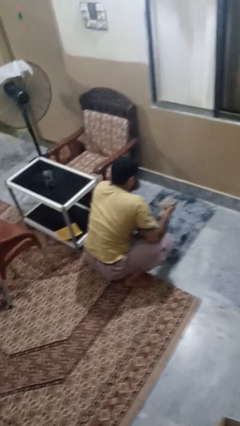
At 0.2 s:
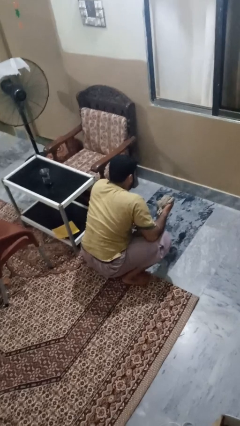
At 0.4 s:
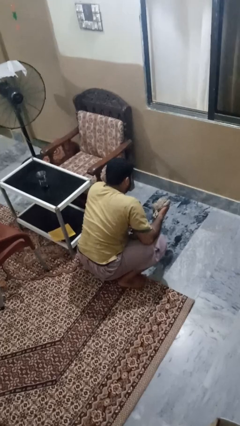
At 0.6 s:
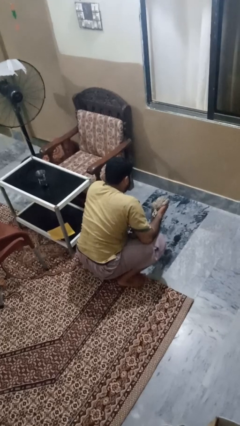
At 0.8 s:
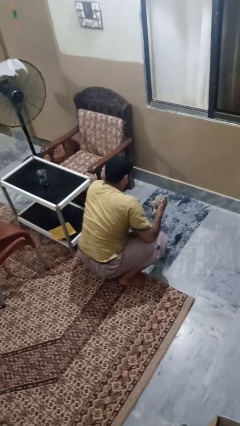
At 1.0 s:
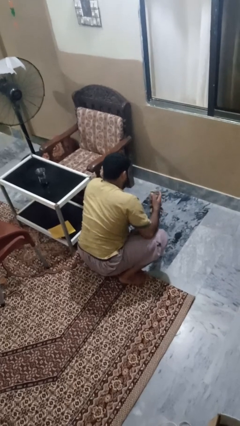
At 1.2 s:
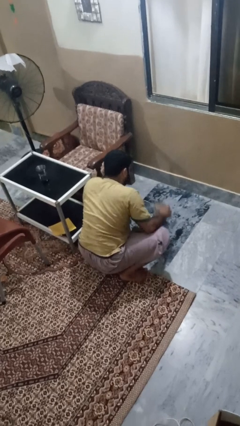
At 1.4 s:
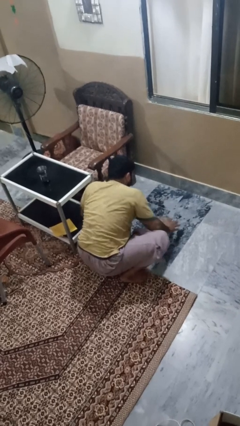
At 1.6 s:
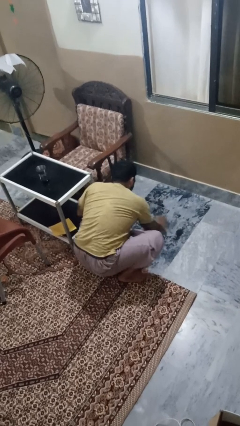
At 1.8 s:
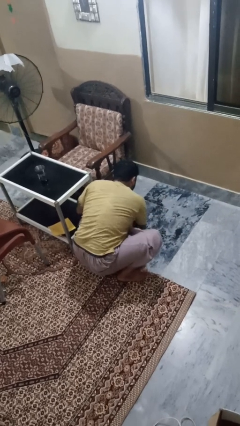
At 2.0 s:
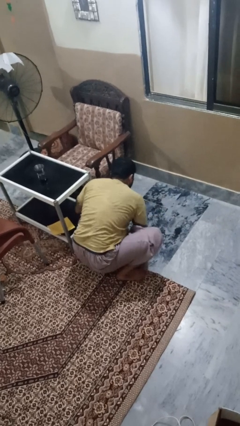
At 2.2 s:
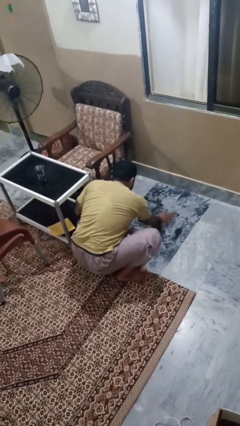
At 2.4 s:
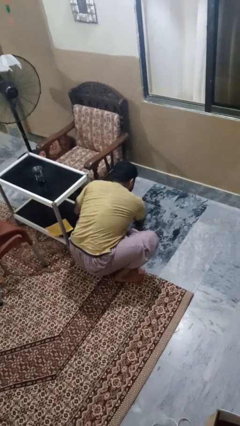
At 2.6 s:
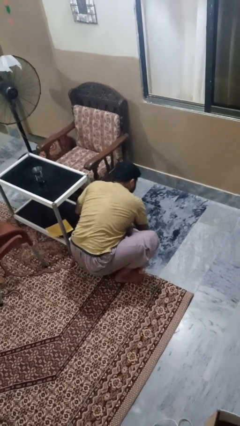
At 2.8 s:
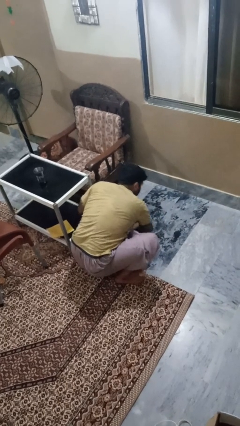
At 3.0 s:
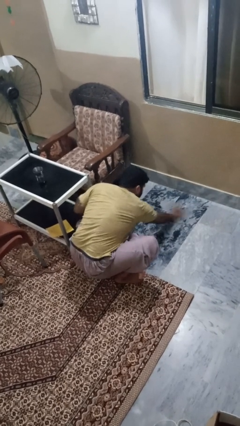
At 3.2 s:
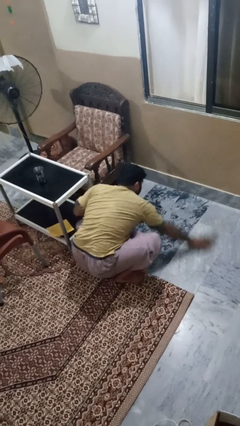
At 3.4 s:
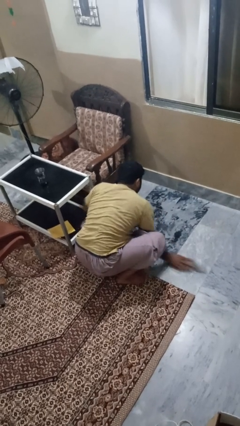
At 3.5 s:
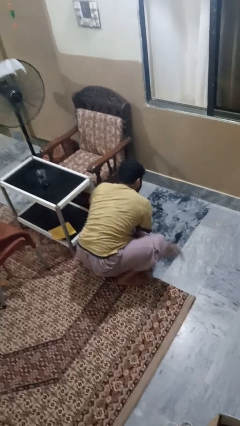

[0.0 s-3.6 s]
person mops

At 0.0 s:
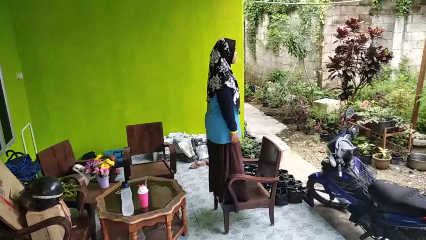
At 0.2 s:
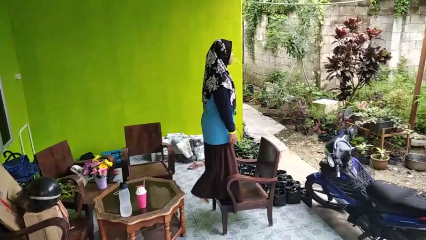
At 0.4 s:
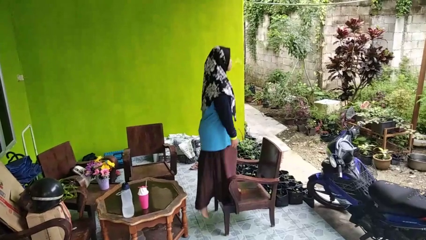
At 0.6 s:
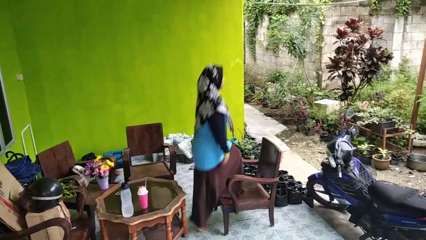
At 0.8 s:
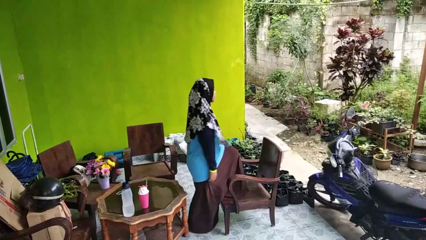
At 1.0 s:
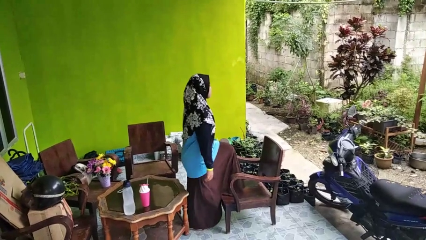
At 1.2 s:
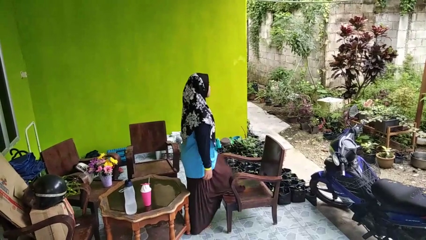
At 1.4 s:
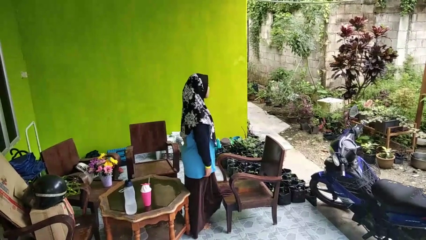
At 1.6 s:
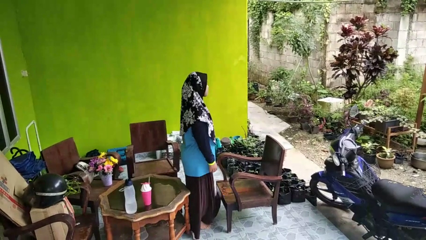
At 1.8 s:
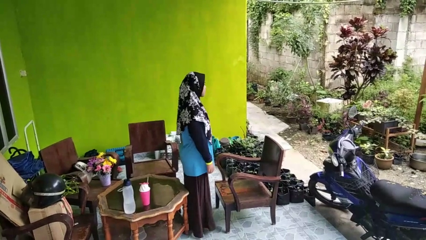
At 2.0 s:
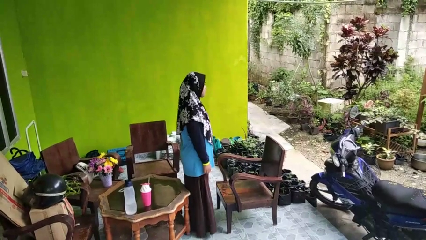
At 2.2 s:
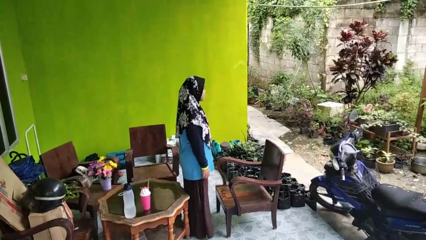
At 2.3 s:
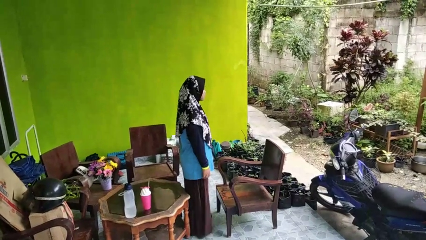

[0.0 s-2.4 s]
person climbs off chair

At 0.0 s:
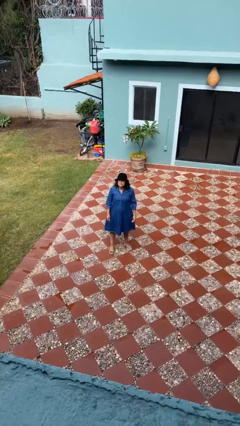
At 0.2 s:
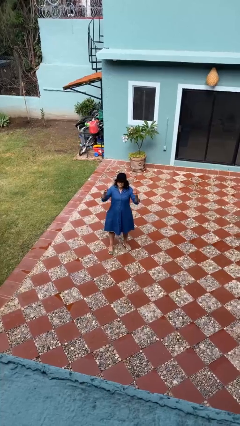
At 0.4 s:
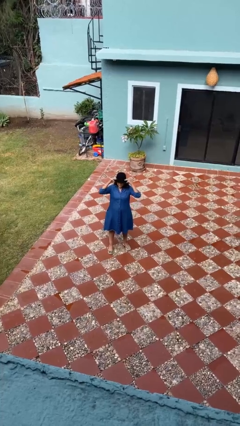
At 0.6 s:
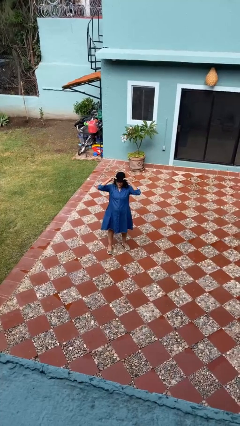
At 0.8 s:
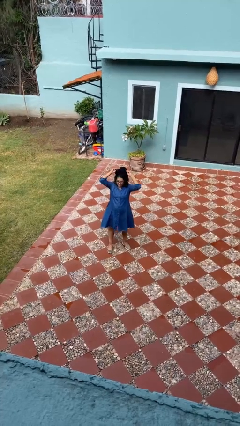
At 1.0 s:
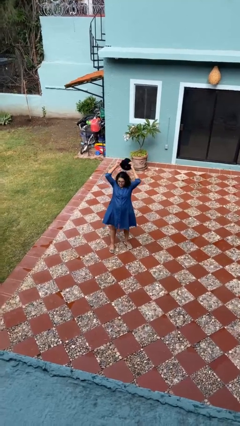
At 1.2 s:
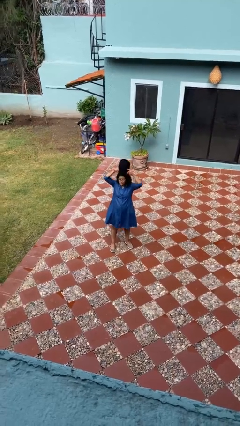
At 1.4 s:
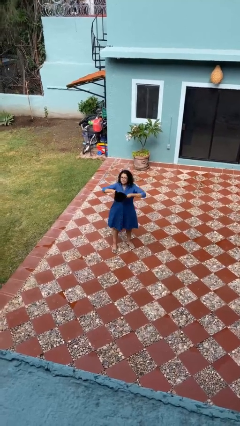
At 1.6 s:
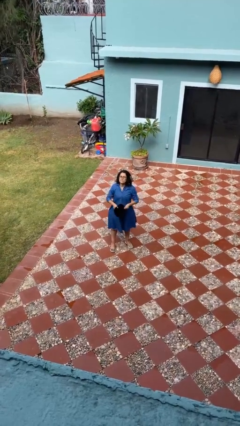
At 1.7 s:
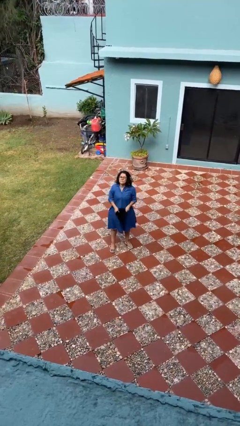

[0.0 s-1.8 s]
person takes off hat

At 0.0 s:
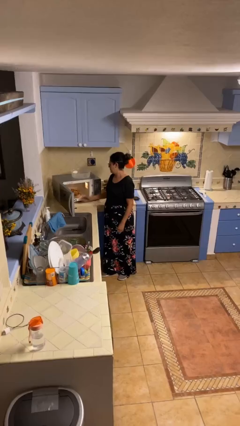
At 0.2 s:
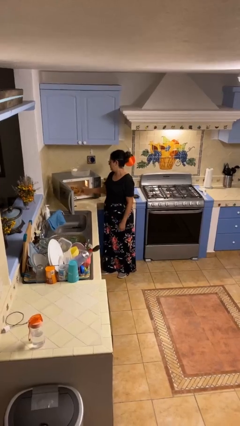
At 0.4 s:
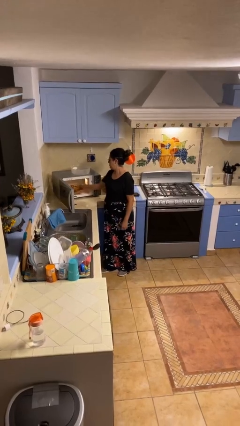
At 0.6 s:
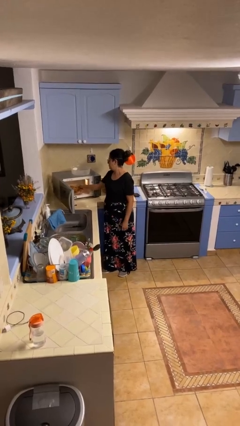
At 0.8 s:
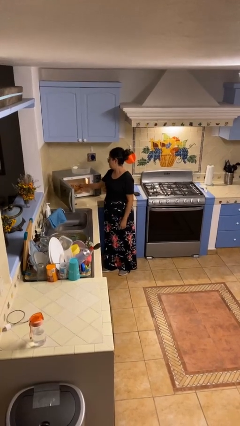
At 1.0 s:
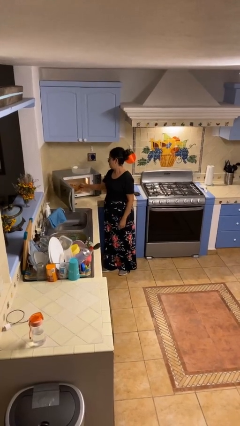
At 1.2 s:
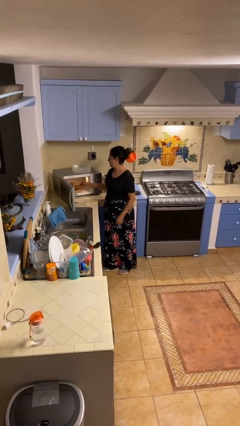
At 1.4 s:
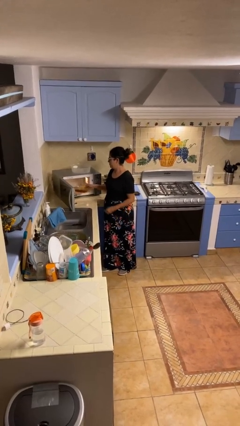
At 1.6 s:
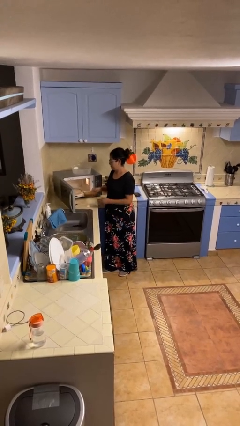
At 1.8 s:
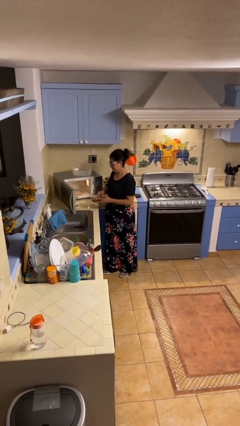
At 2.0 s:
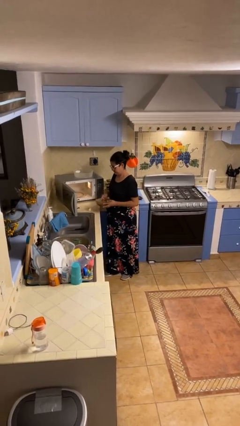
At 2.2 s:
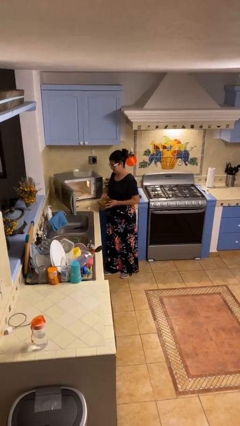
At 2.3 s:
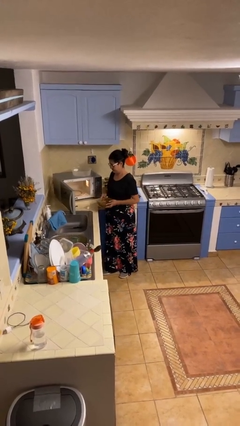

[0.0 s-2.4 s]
person takes object from microwave

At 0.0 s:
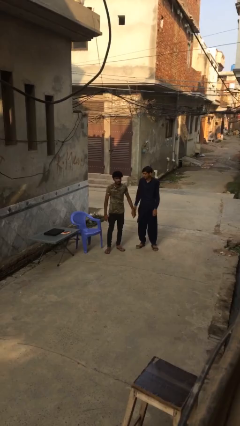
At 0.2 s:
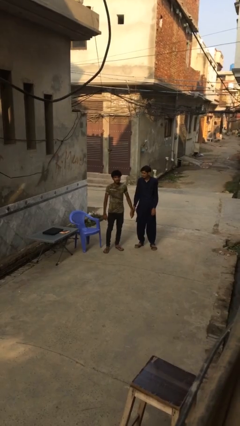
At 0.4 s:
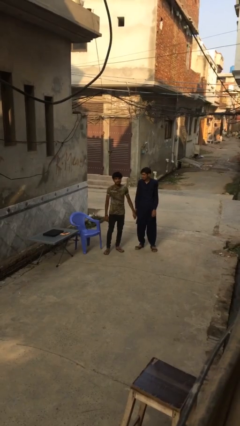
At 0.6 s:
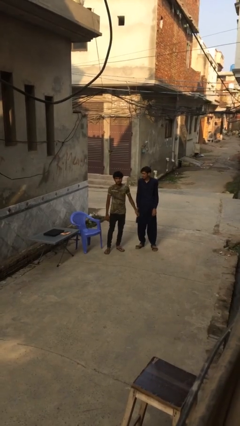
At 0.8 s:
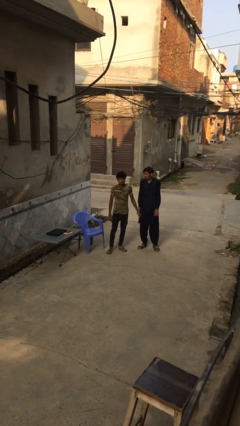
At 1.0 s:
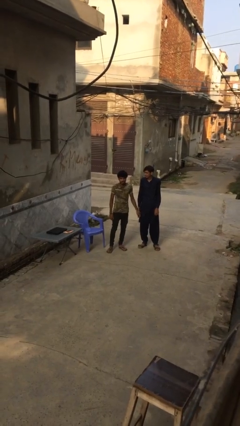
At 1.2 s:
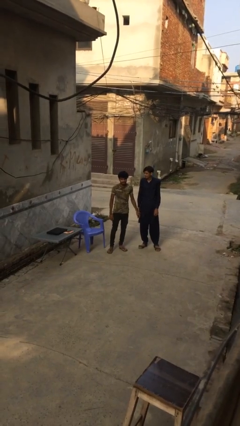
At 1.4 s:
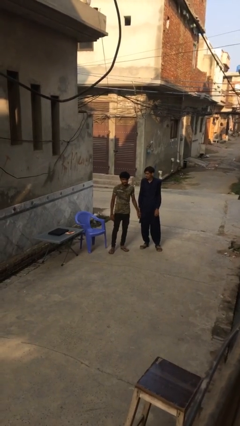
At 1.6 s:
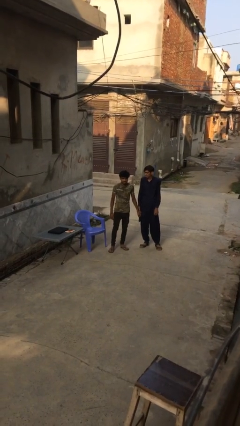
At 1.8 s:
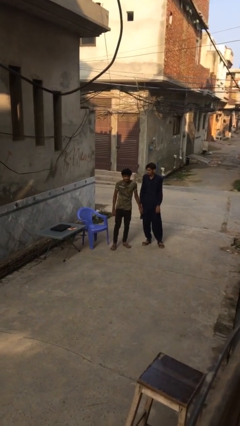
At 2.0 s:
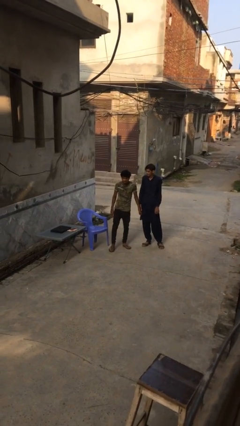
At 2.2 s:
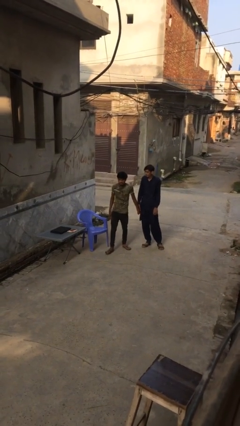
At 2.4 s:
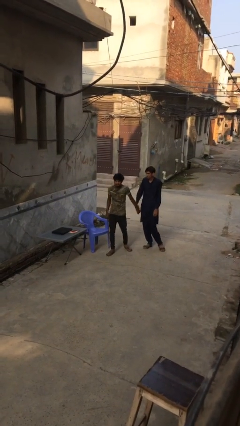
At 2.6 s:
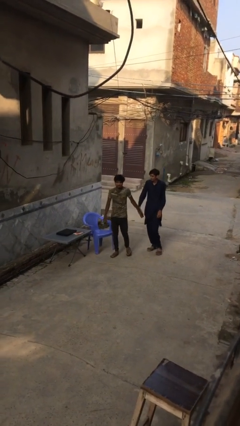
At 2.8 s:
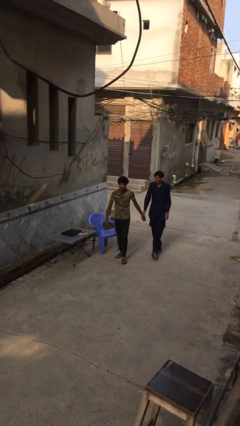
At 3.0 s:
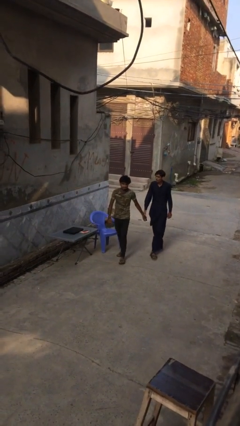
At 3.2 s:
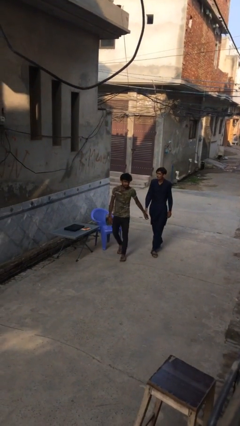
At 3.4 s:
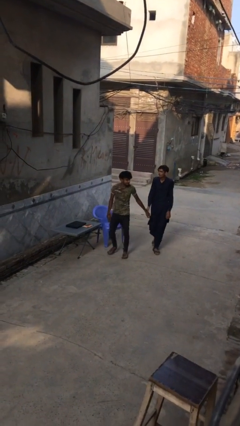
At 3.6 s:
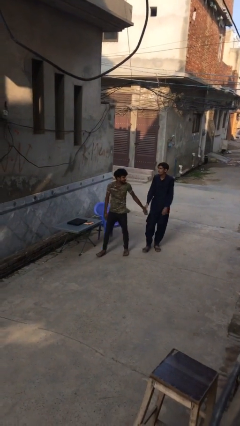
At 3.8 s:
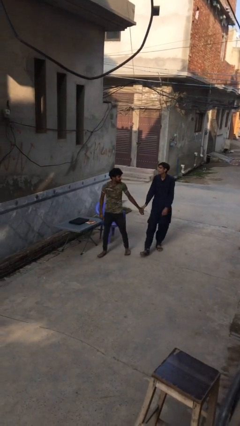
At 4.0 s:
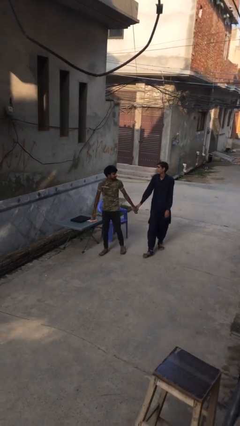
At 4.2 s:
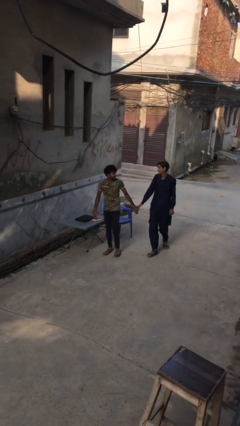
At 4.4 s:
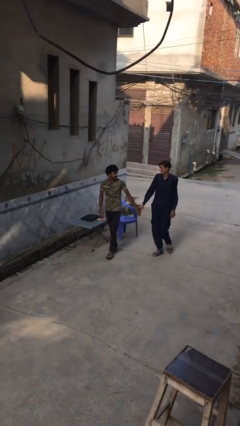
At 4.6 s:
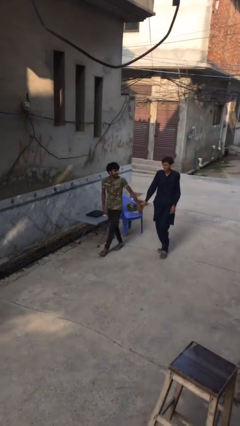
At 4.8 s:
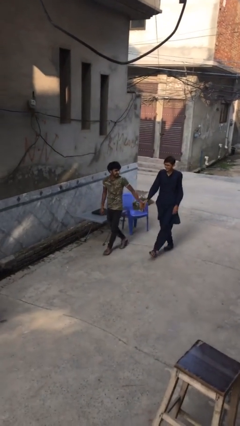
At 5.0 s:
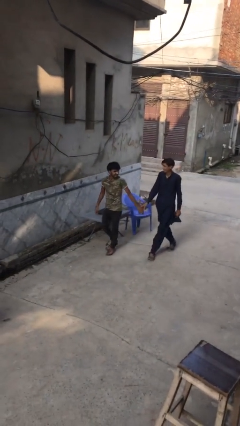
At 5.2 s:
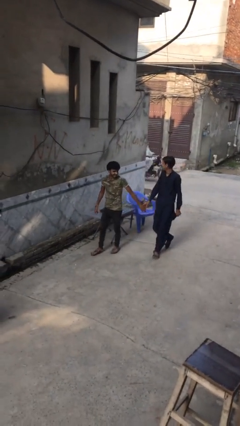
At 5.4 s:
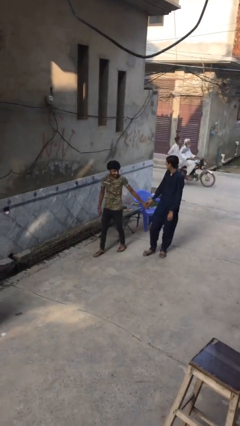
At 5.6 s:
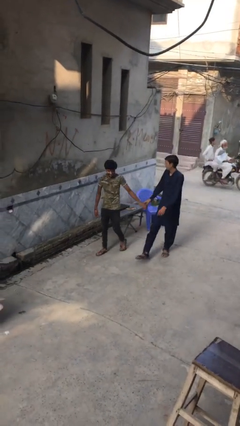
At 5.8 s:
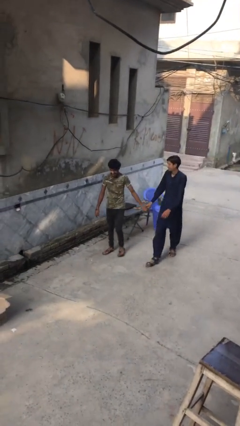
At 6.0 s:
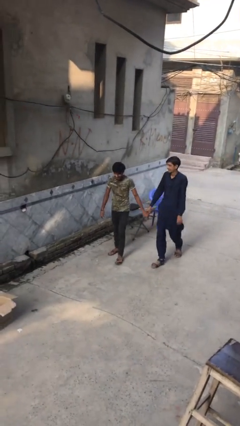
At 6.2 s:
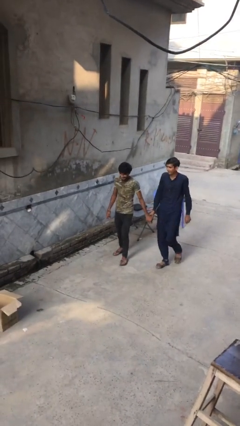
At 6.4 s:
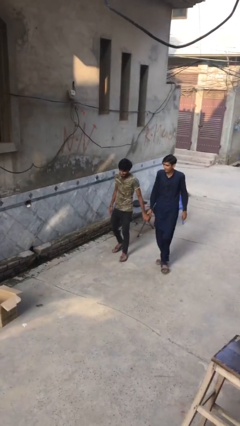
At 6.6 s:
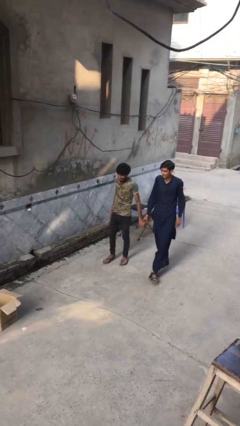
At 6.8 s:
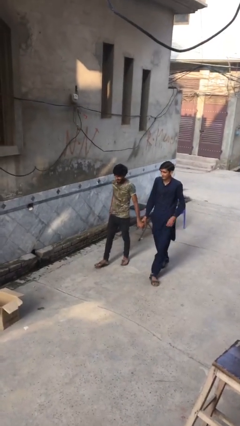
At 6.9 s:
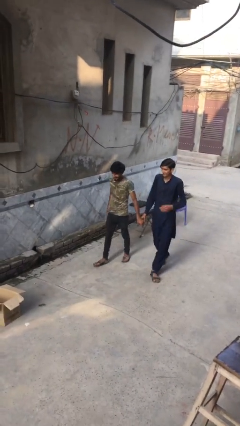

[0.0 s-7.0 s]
person holds hand

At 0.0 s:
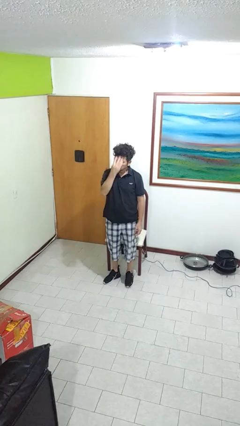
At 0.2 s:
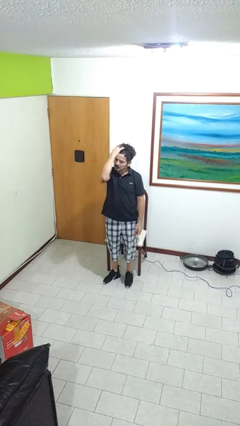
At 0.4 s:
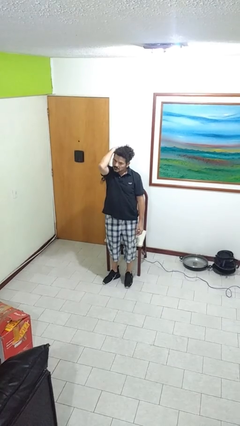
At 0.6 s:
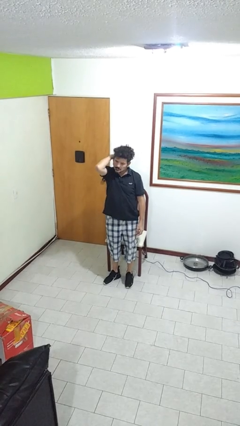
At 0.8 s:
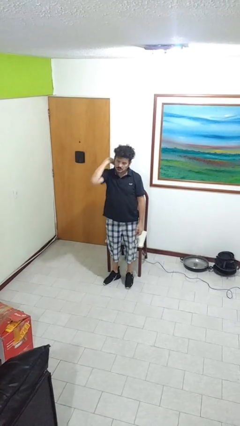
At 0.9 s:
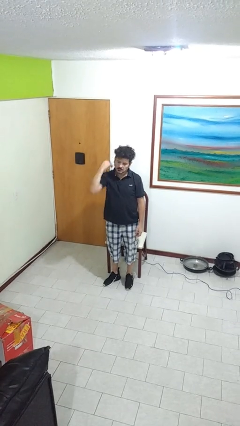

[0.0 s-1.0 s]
person strokes hair
